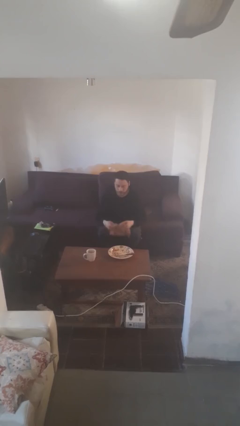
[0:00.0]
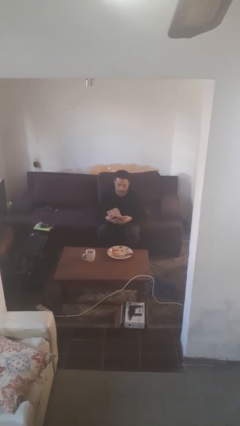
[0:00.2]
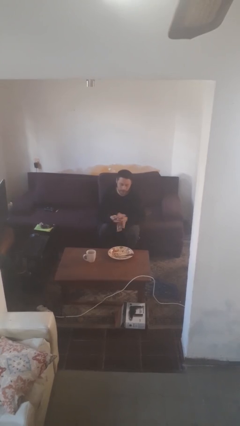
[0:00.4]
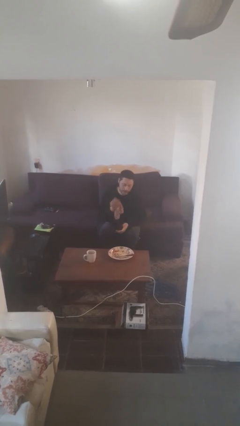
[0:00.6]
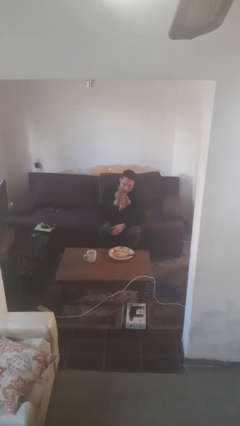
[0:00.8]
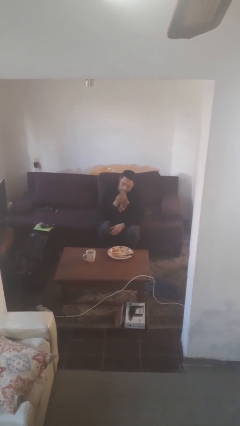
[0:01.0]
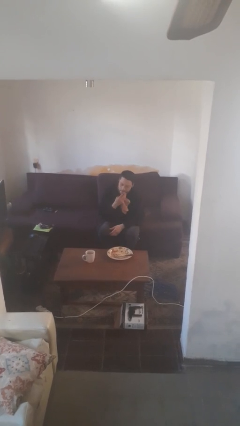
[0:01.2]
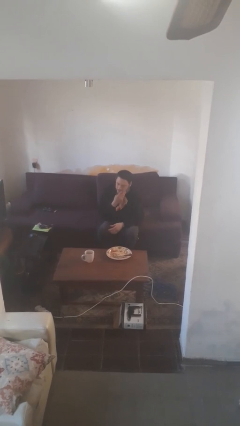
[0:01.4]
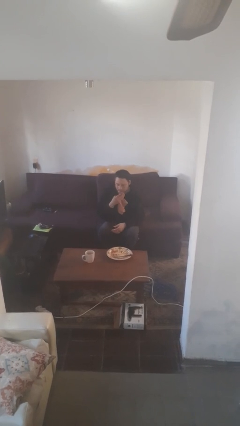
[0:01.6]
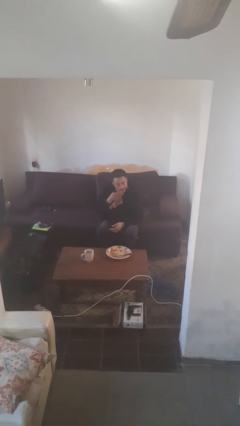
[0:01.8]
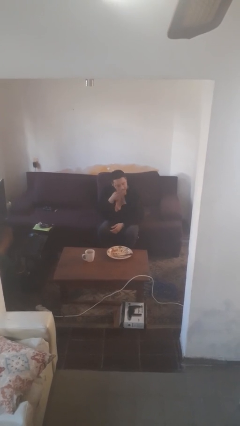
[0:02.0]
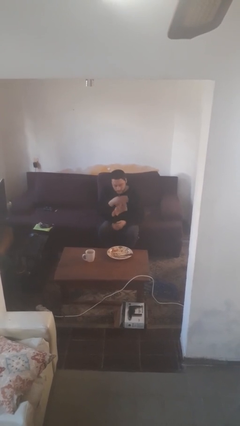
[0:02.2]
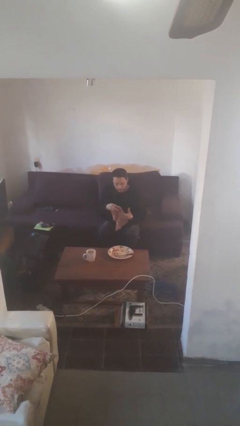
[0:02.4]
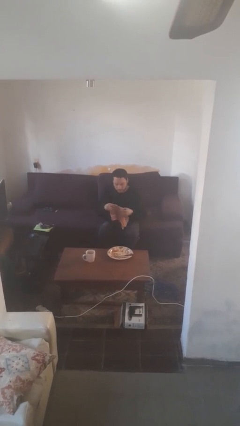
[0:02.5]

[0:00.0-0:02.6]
person wipes mouth with napkin

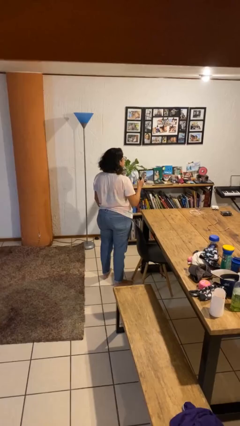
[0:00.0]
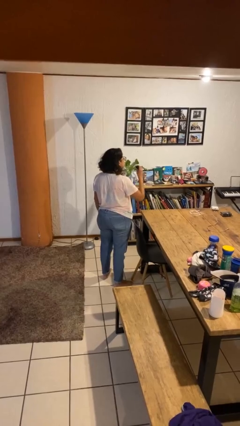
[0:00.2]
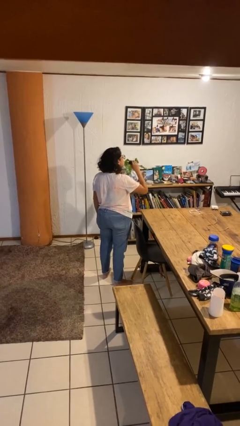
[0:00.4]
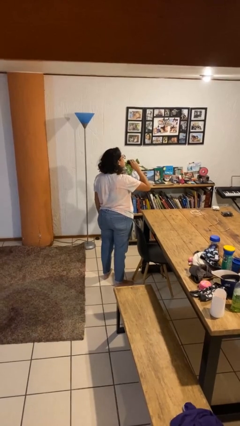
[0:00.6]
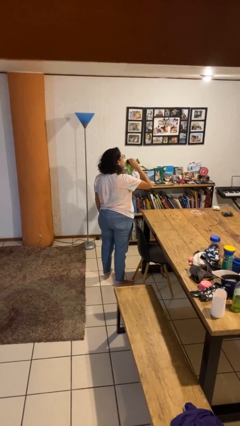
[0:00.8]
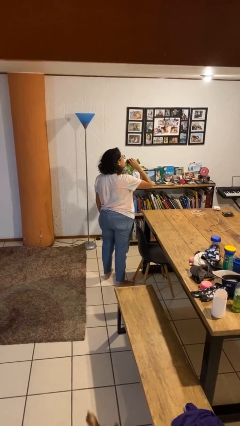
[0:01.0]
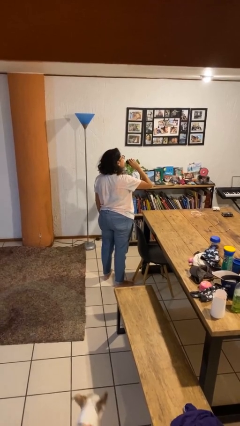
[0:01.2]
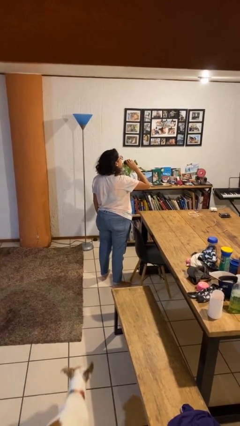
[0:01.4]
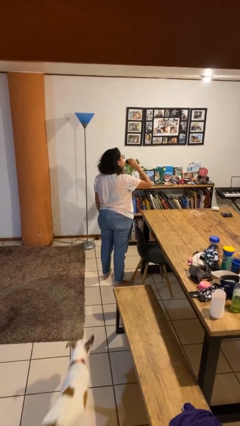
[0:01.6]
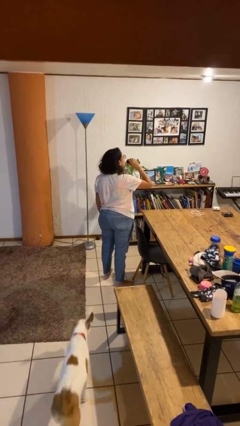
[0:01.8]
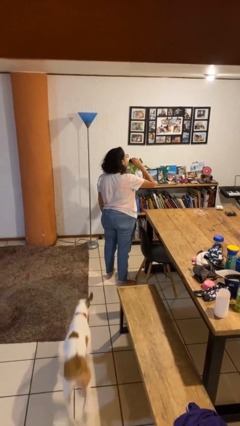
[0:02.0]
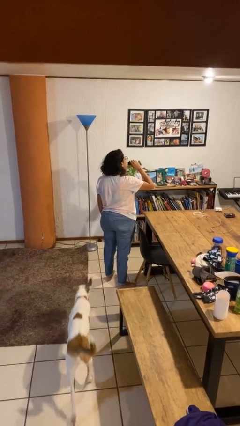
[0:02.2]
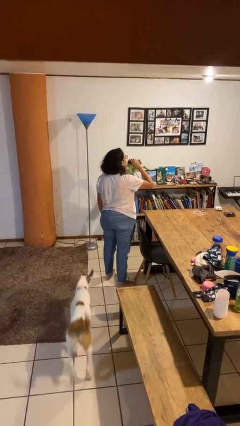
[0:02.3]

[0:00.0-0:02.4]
person vapes

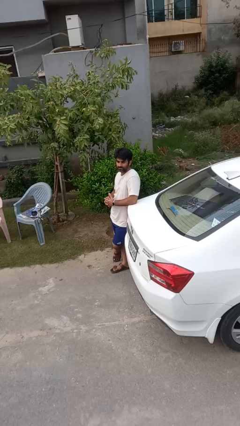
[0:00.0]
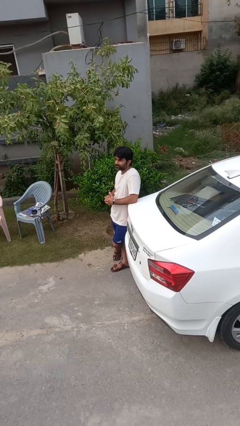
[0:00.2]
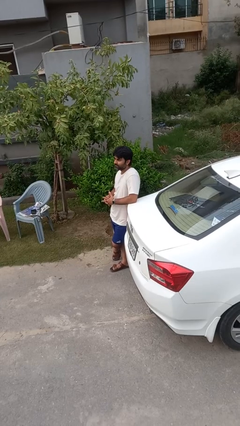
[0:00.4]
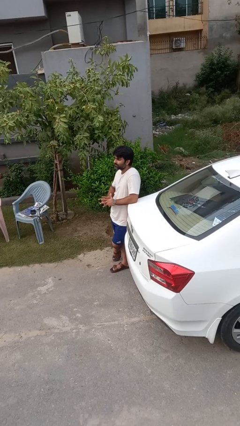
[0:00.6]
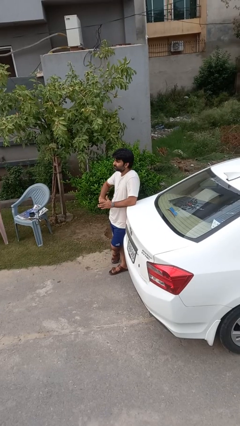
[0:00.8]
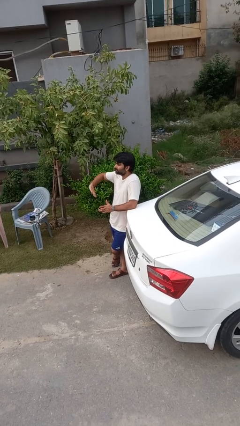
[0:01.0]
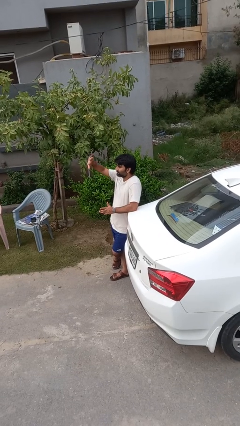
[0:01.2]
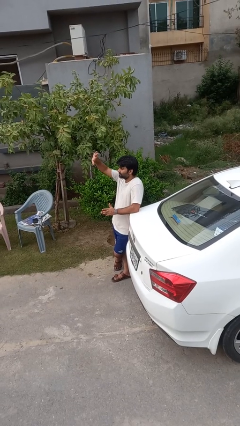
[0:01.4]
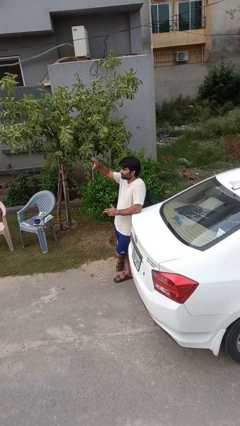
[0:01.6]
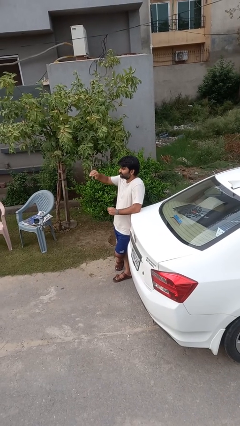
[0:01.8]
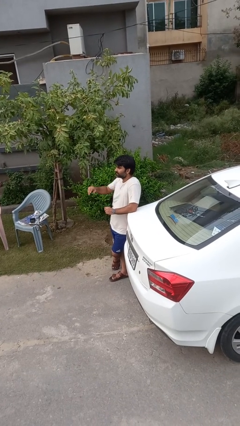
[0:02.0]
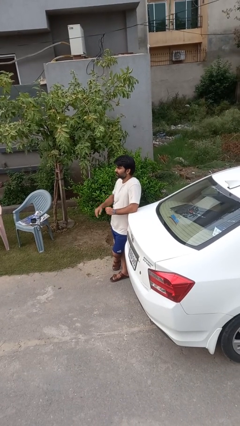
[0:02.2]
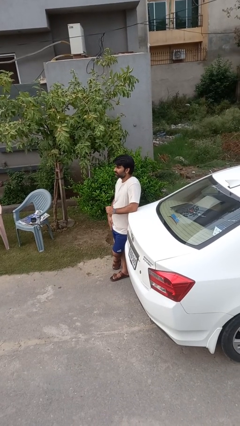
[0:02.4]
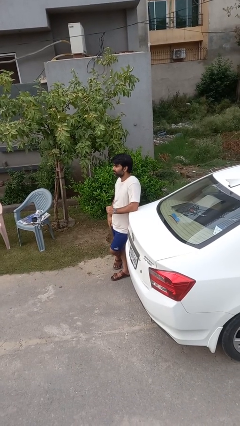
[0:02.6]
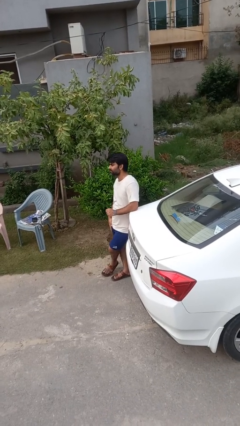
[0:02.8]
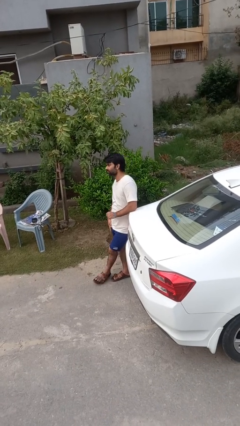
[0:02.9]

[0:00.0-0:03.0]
person gestures swipe up

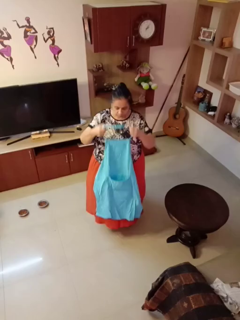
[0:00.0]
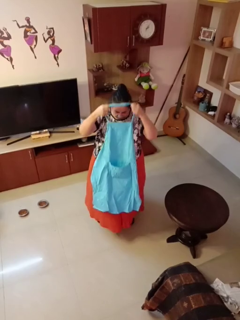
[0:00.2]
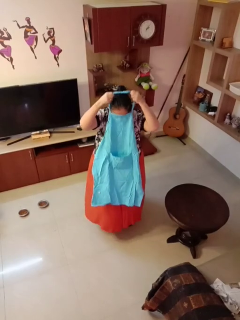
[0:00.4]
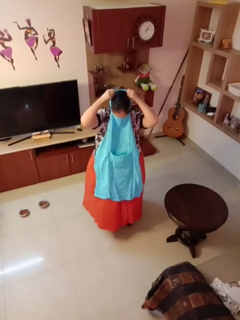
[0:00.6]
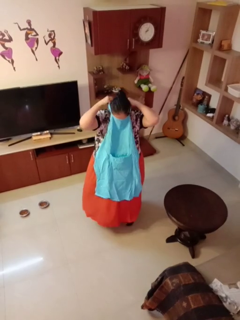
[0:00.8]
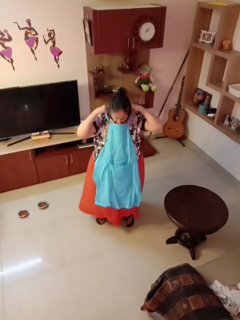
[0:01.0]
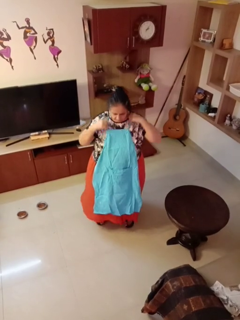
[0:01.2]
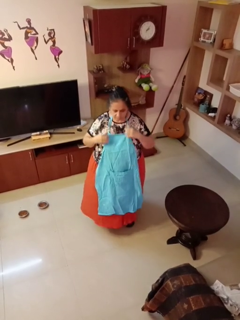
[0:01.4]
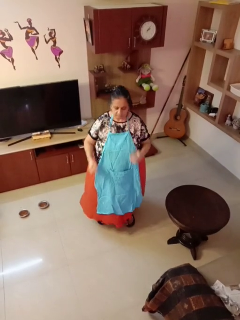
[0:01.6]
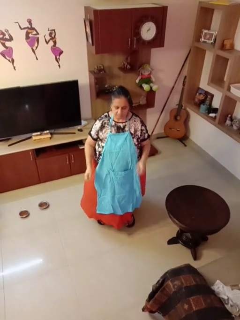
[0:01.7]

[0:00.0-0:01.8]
person puts on apron

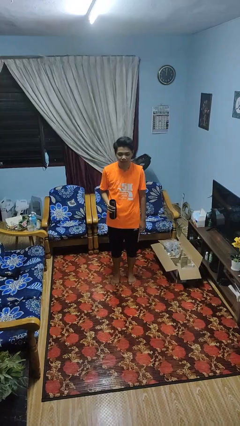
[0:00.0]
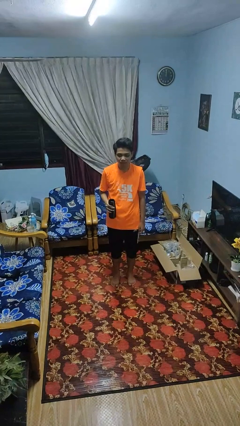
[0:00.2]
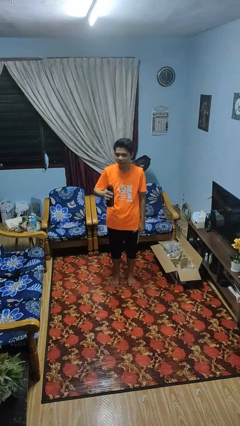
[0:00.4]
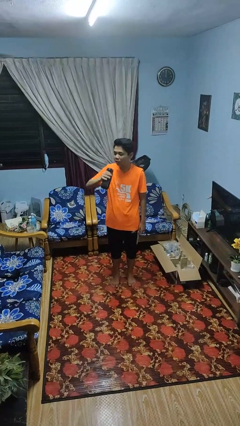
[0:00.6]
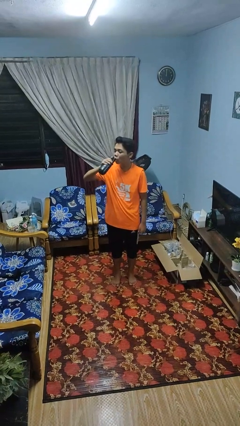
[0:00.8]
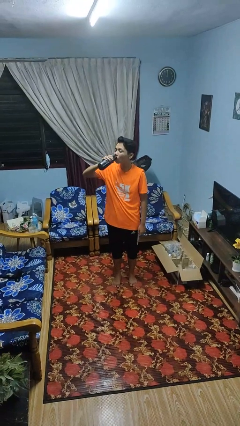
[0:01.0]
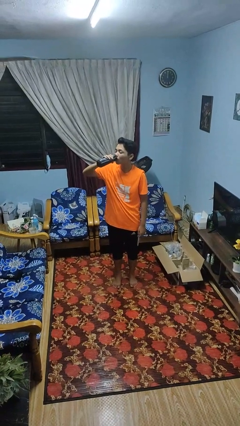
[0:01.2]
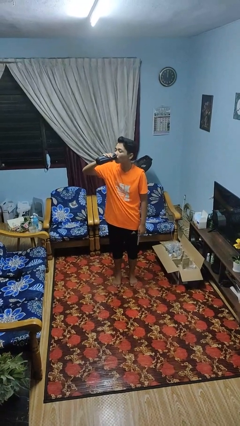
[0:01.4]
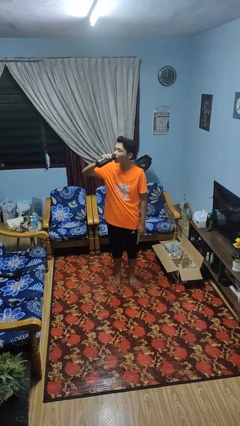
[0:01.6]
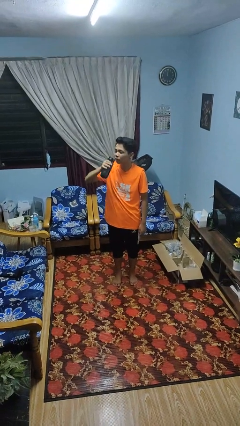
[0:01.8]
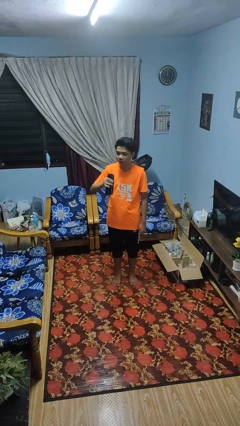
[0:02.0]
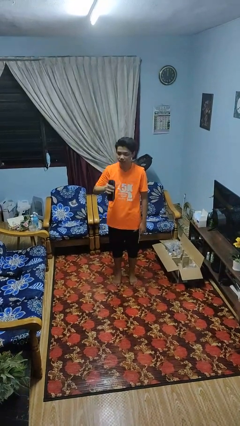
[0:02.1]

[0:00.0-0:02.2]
person drinks from bottle

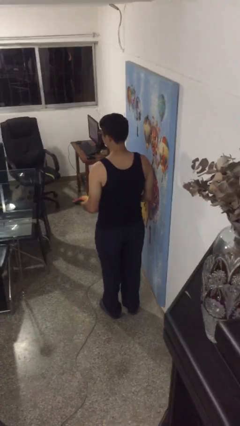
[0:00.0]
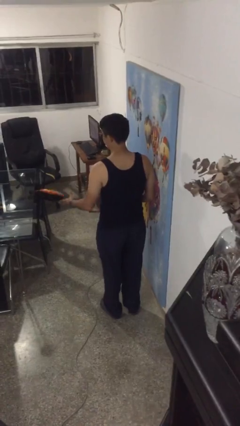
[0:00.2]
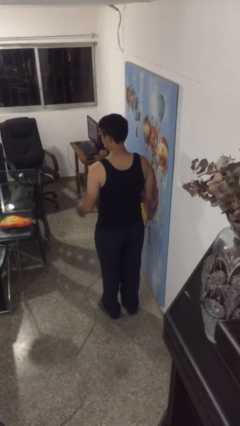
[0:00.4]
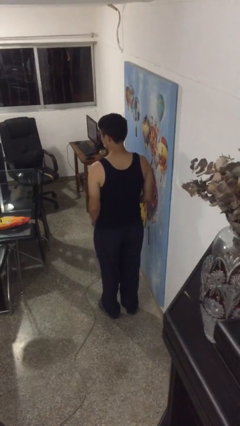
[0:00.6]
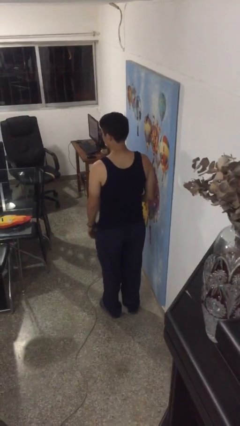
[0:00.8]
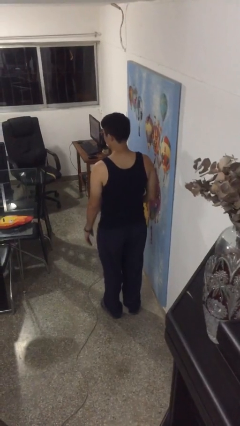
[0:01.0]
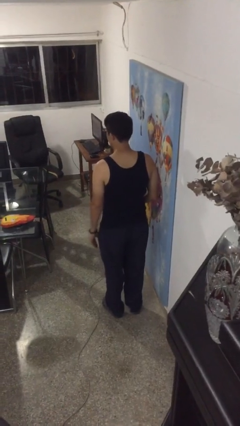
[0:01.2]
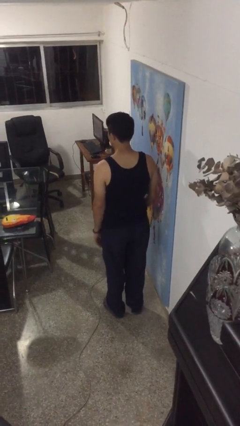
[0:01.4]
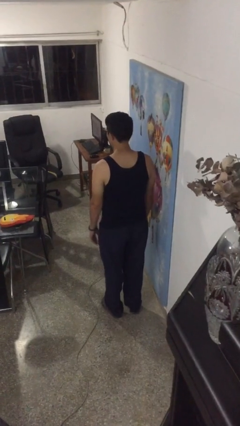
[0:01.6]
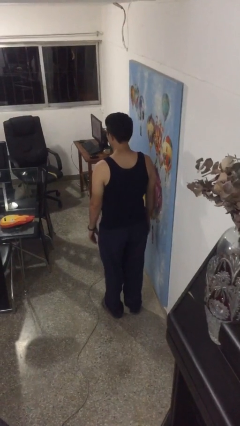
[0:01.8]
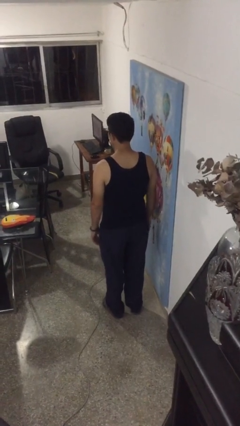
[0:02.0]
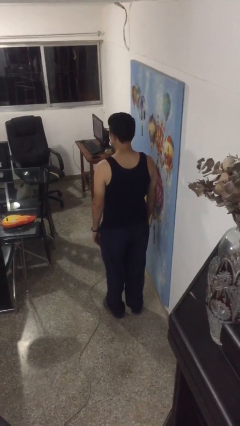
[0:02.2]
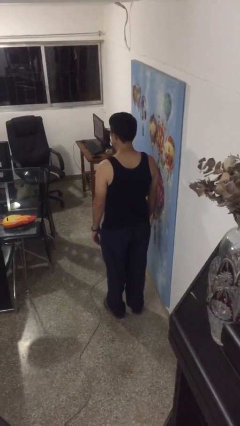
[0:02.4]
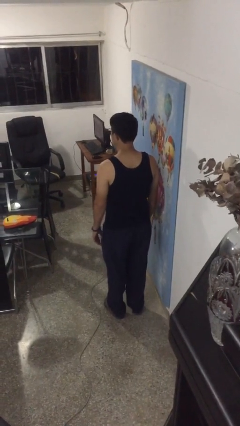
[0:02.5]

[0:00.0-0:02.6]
person throws object on table

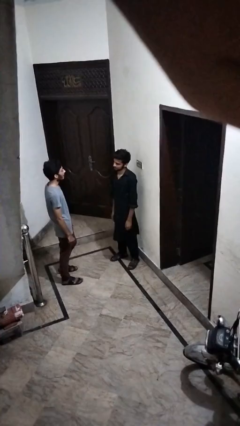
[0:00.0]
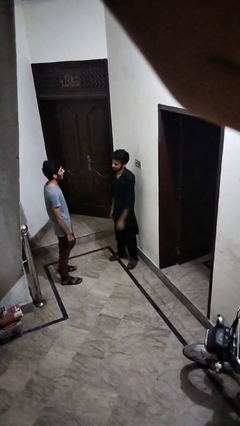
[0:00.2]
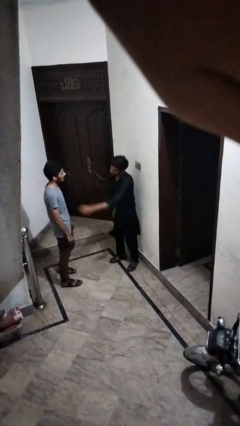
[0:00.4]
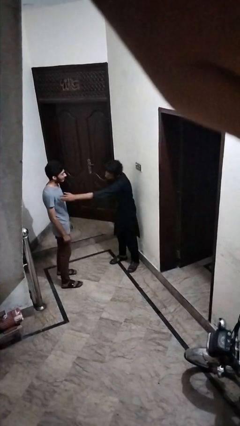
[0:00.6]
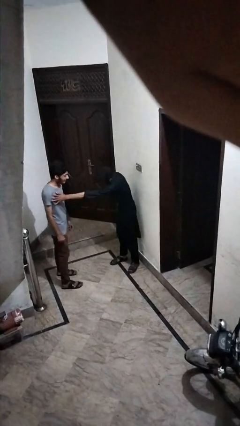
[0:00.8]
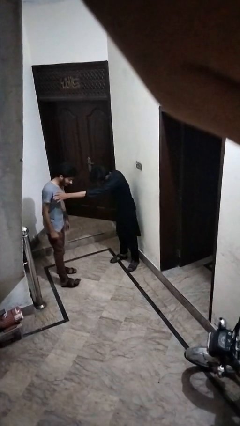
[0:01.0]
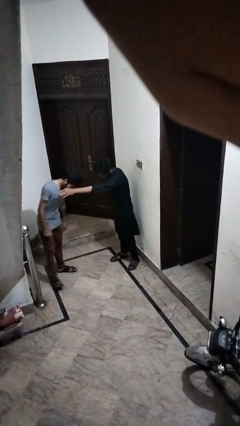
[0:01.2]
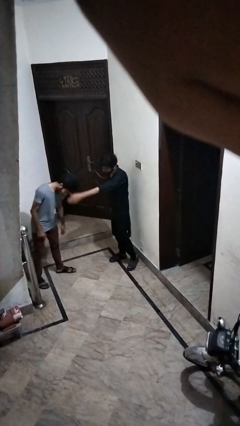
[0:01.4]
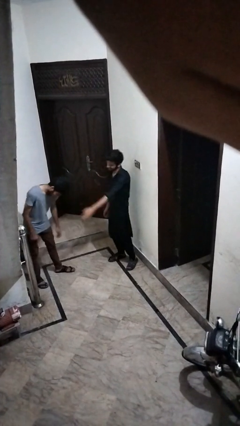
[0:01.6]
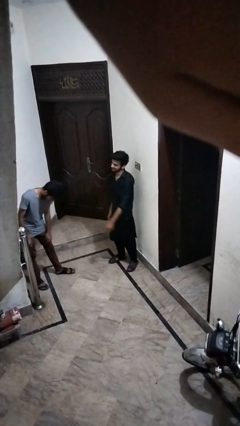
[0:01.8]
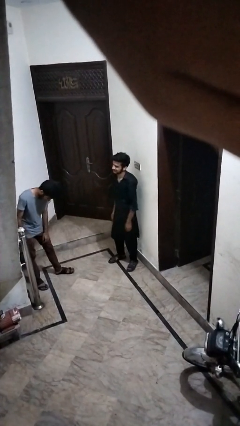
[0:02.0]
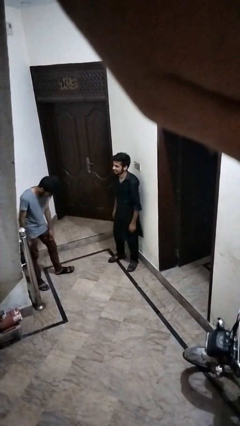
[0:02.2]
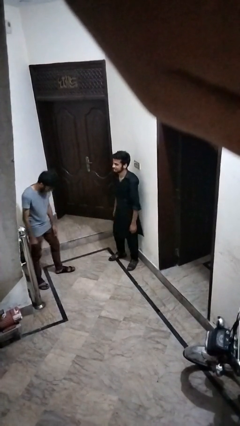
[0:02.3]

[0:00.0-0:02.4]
person shoves person

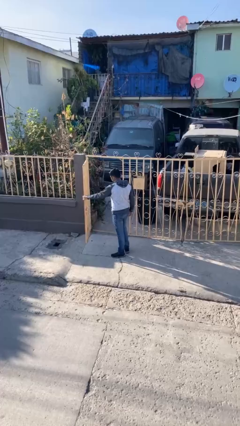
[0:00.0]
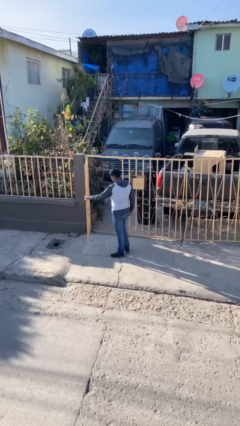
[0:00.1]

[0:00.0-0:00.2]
person closes facility door

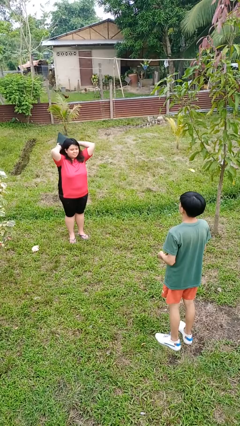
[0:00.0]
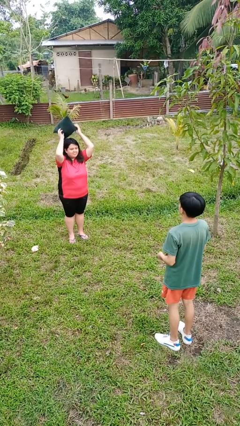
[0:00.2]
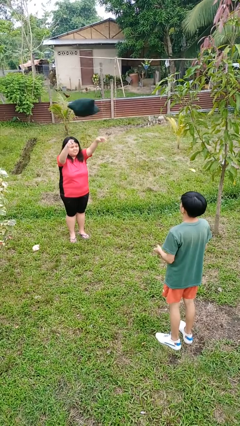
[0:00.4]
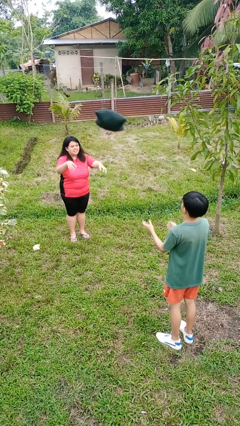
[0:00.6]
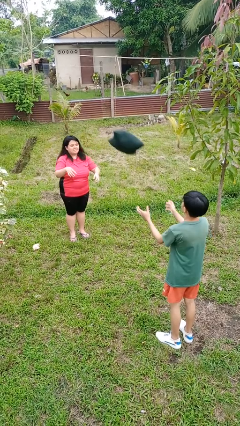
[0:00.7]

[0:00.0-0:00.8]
person throws object to person
